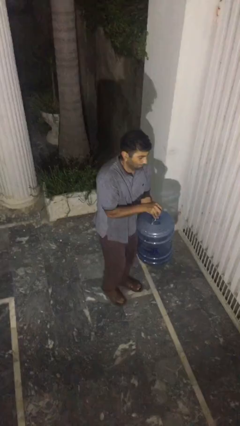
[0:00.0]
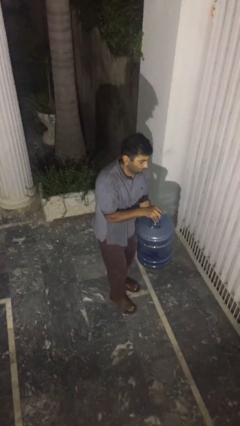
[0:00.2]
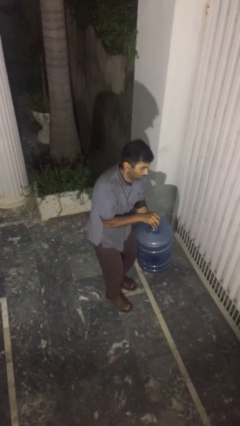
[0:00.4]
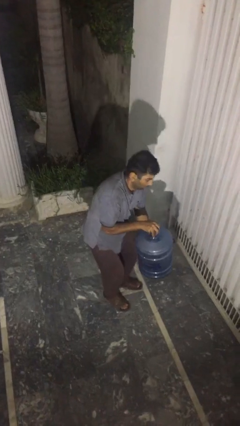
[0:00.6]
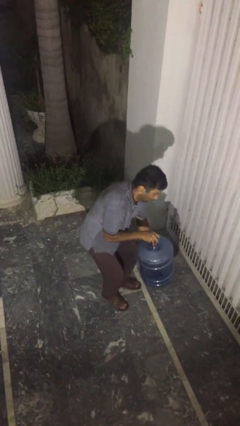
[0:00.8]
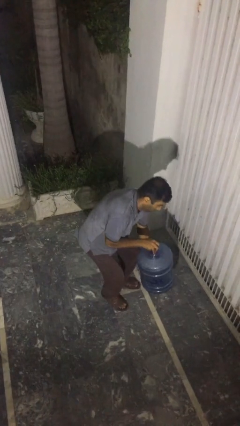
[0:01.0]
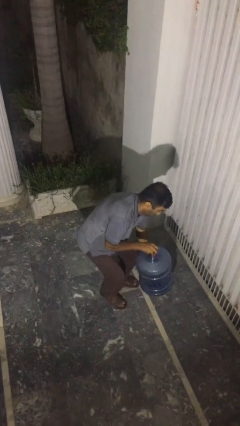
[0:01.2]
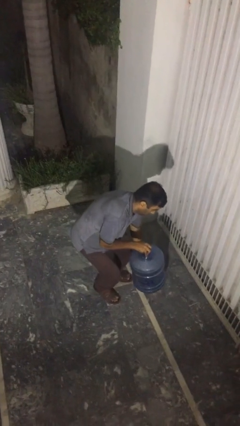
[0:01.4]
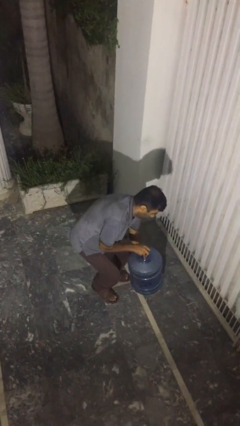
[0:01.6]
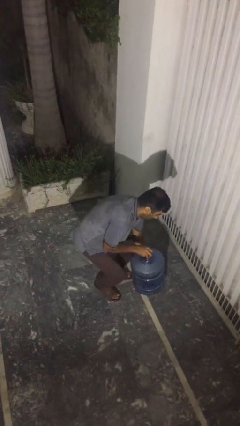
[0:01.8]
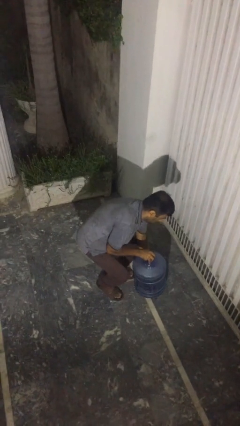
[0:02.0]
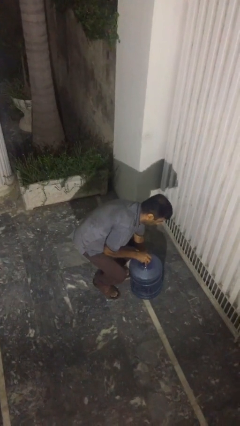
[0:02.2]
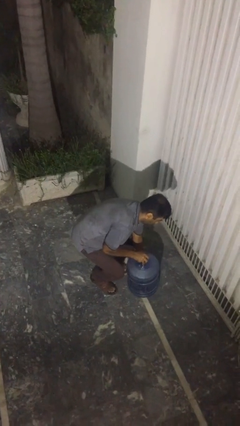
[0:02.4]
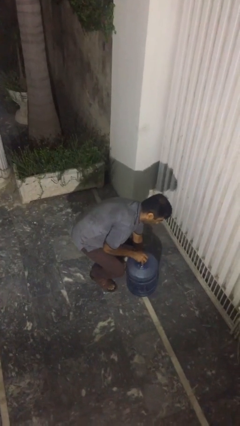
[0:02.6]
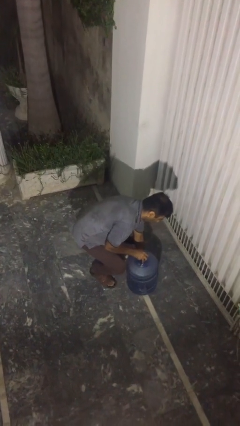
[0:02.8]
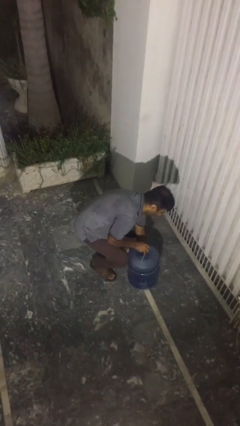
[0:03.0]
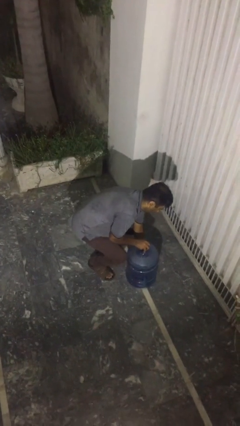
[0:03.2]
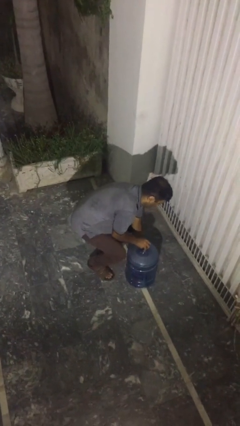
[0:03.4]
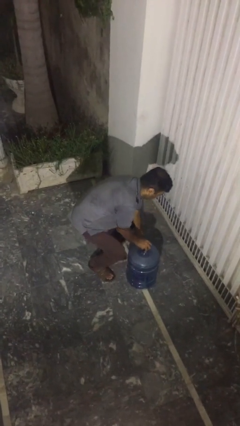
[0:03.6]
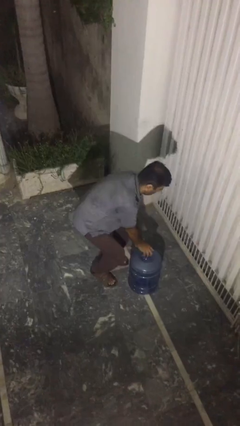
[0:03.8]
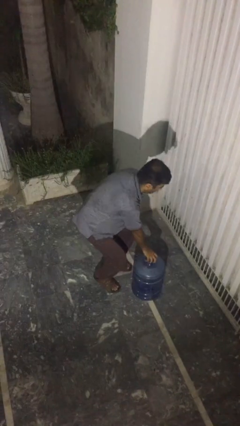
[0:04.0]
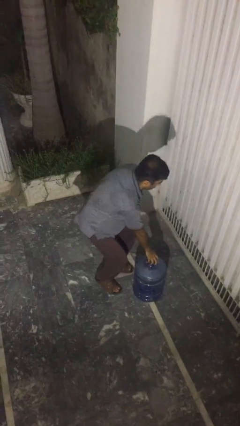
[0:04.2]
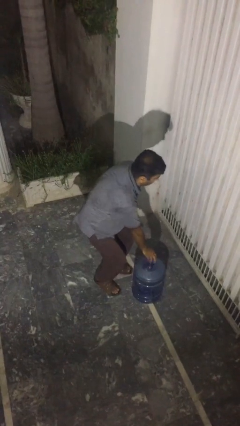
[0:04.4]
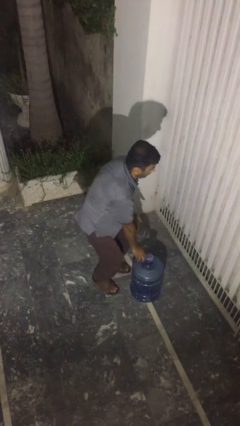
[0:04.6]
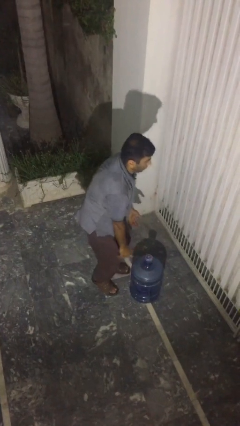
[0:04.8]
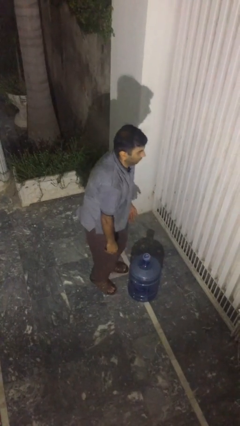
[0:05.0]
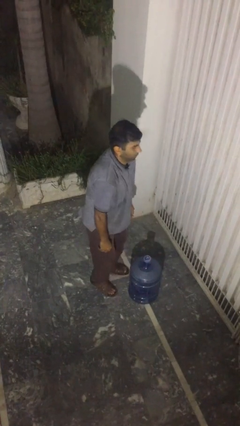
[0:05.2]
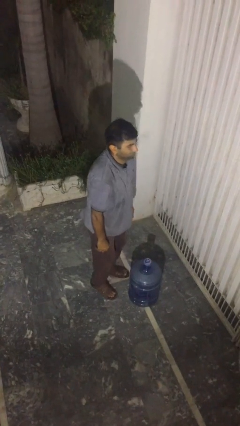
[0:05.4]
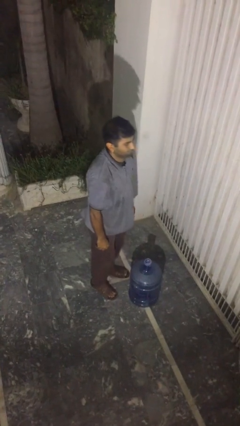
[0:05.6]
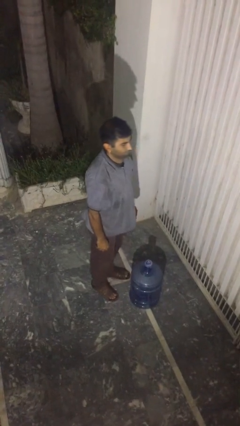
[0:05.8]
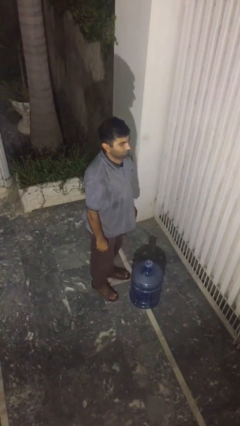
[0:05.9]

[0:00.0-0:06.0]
person puts down object on floor

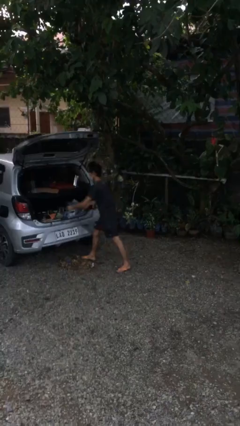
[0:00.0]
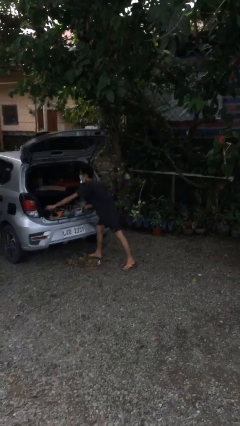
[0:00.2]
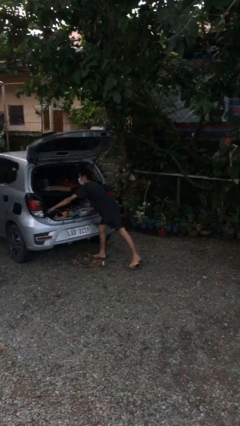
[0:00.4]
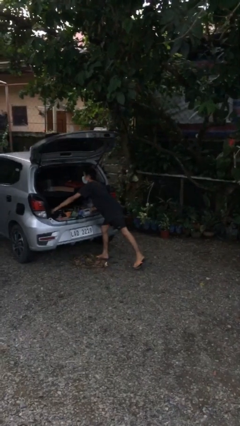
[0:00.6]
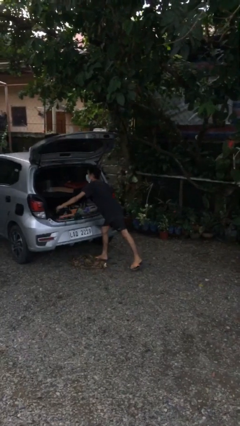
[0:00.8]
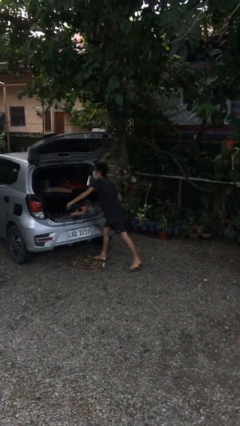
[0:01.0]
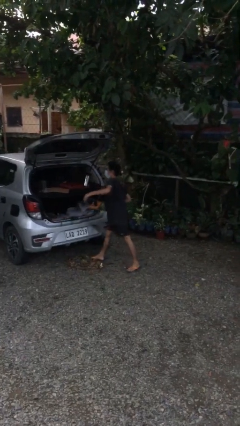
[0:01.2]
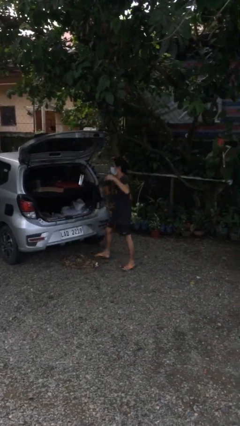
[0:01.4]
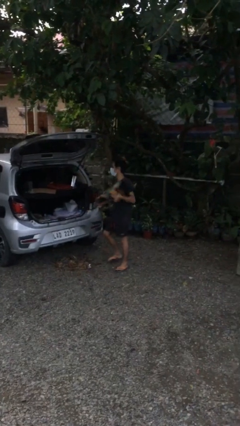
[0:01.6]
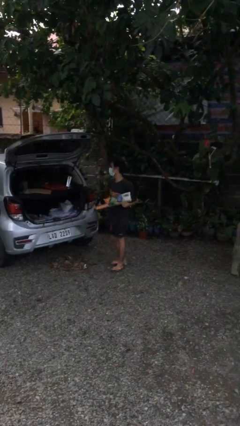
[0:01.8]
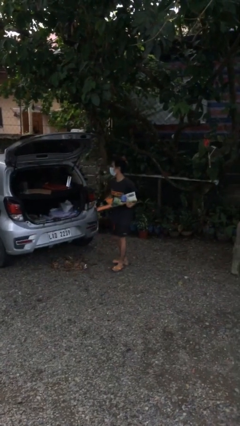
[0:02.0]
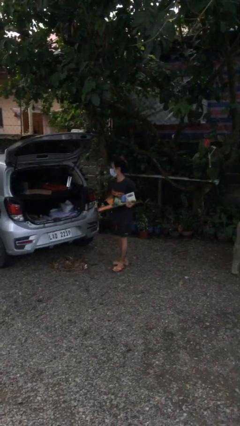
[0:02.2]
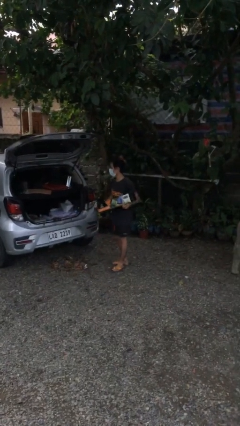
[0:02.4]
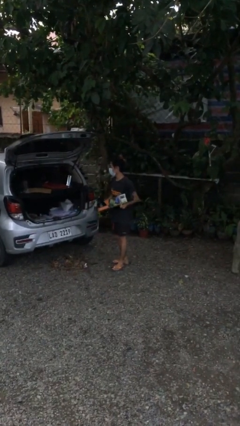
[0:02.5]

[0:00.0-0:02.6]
person unloads car

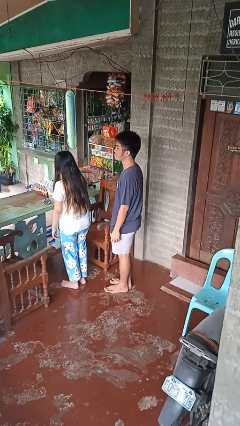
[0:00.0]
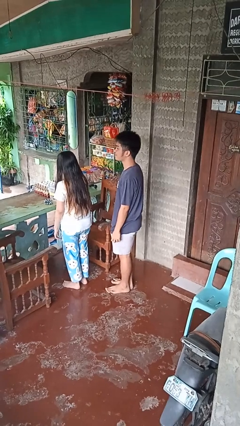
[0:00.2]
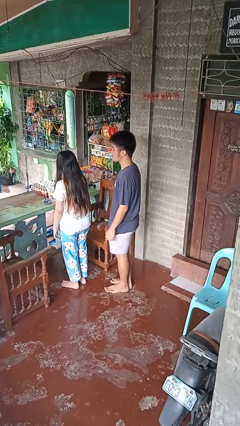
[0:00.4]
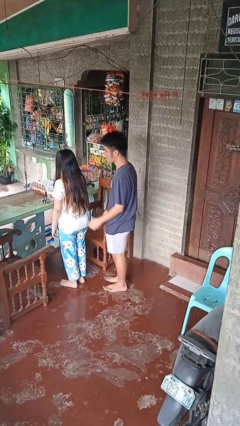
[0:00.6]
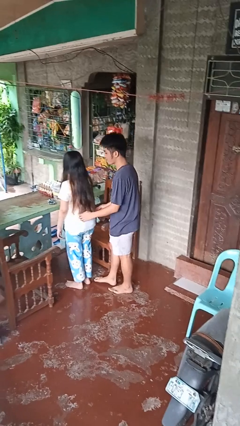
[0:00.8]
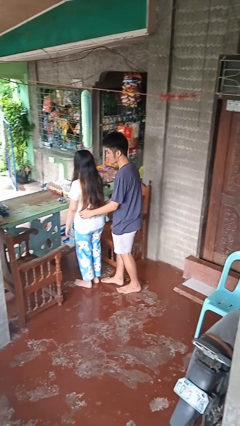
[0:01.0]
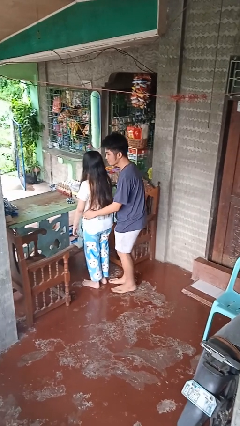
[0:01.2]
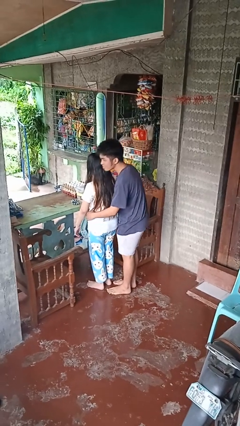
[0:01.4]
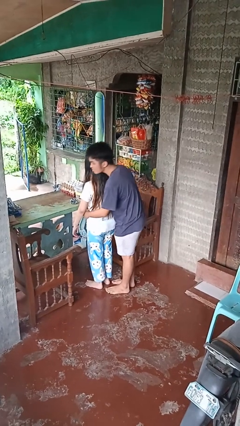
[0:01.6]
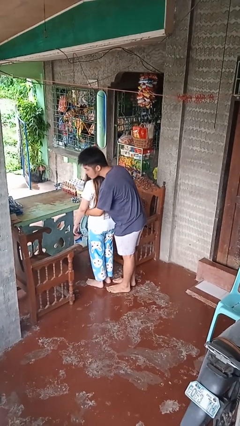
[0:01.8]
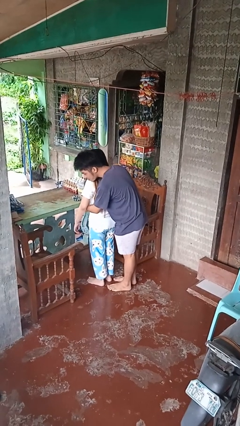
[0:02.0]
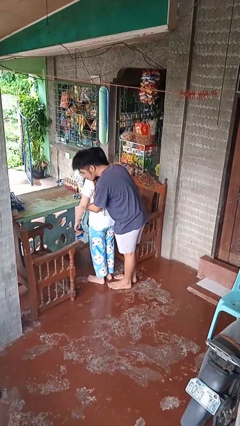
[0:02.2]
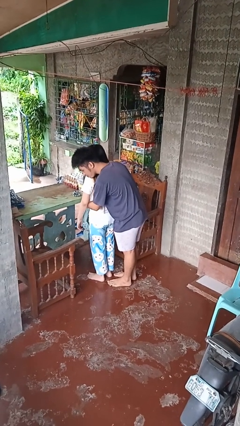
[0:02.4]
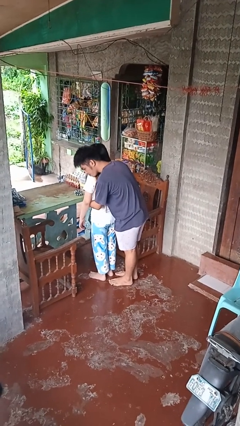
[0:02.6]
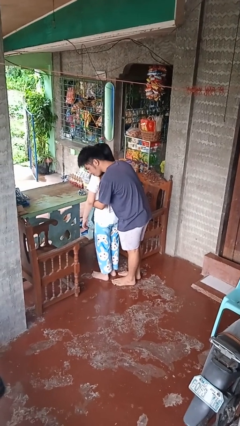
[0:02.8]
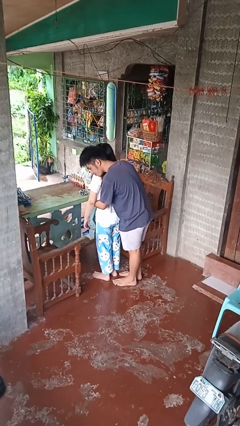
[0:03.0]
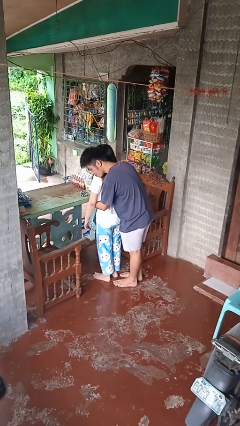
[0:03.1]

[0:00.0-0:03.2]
person hugs person from behind

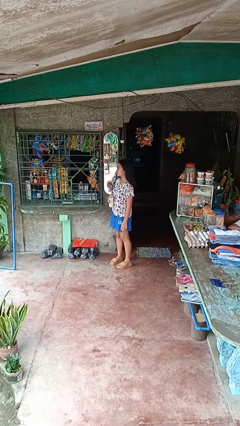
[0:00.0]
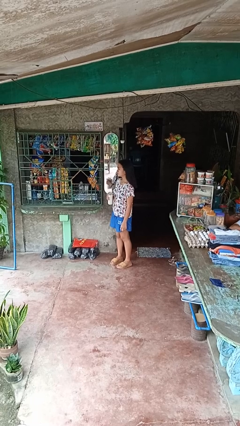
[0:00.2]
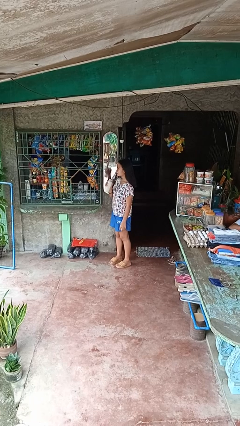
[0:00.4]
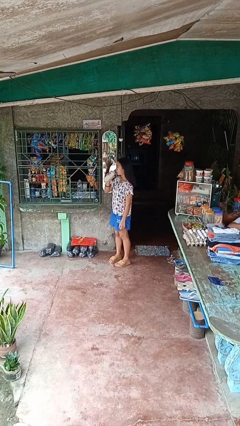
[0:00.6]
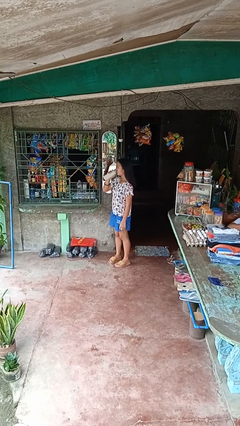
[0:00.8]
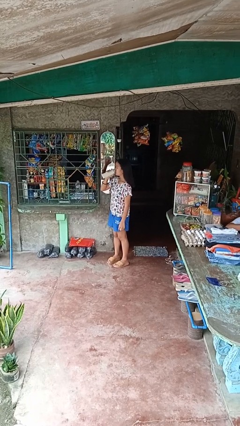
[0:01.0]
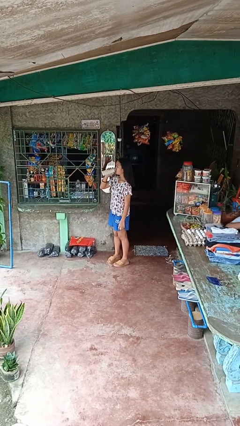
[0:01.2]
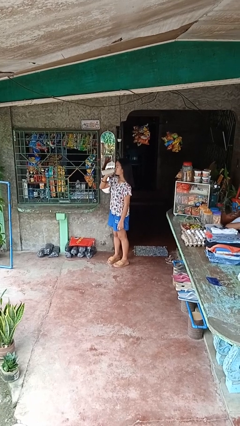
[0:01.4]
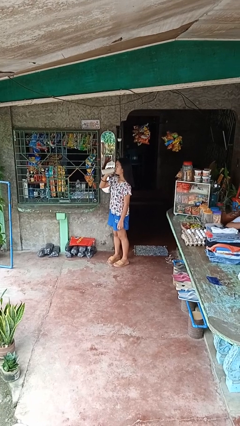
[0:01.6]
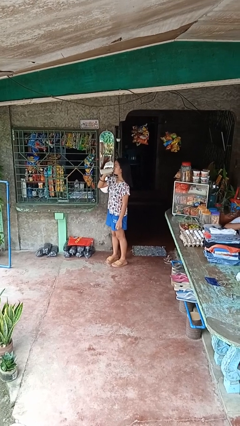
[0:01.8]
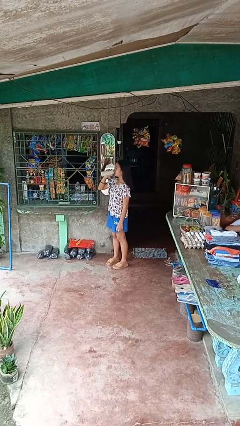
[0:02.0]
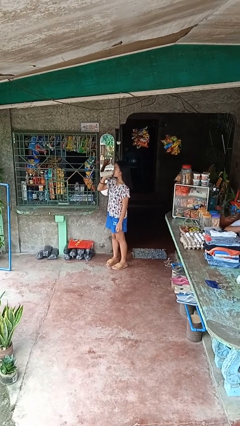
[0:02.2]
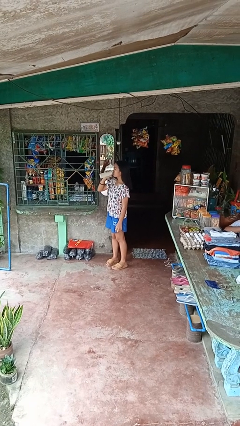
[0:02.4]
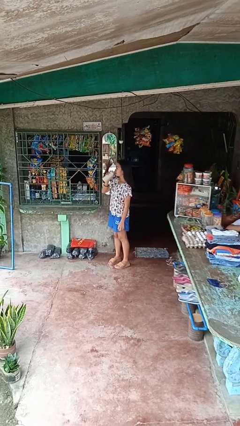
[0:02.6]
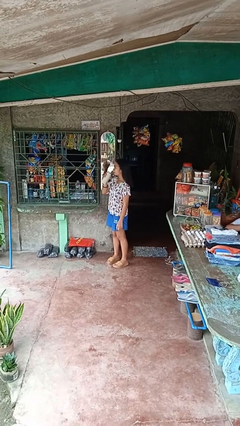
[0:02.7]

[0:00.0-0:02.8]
person drinks from bottle

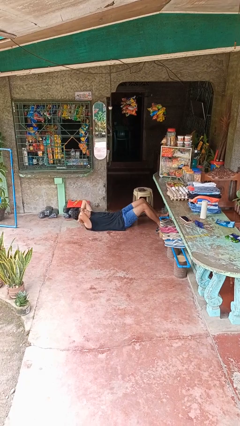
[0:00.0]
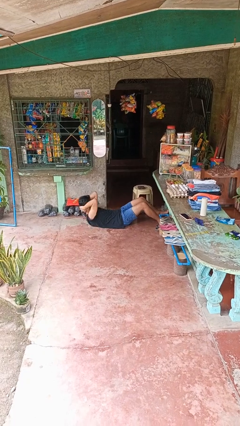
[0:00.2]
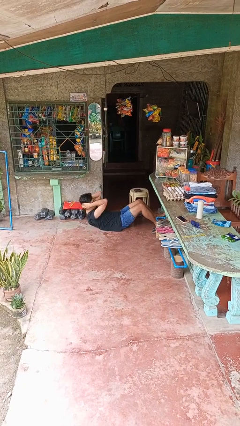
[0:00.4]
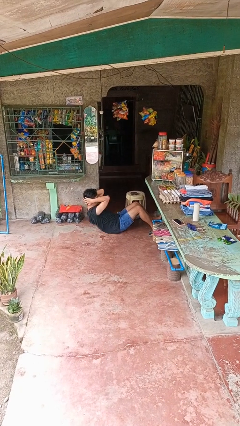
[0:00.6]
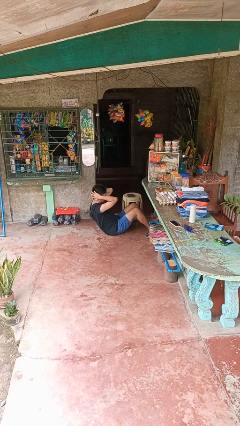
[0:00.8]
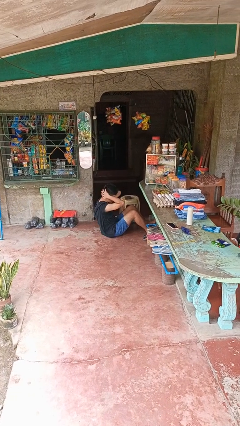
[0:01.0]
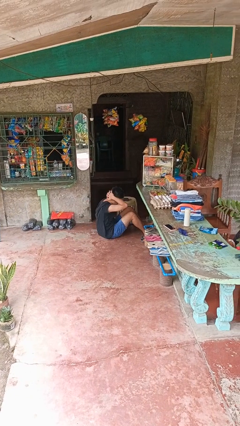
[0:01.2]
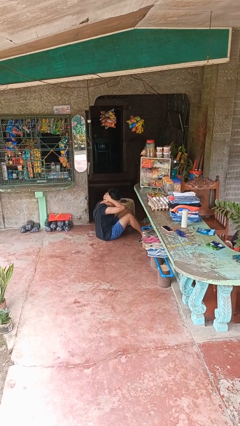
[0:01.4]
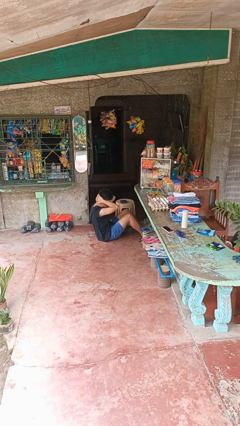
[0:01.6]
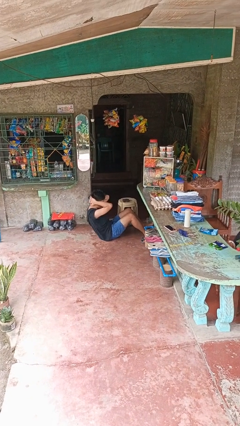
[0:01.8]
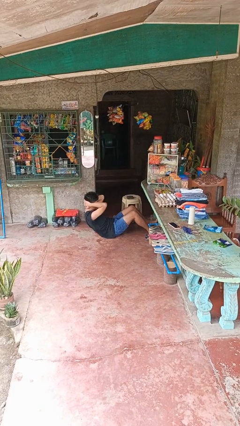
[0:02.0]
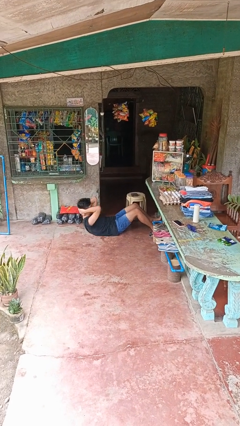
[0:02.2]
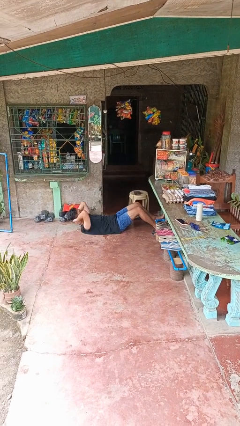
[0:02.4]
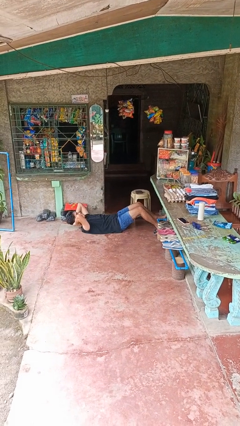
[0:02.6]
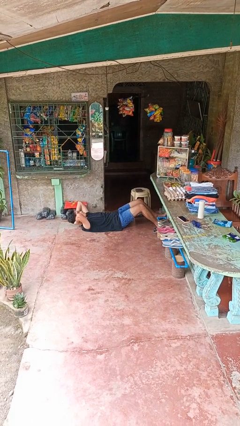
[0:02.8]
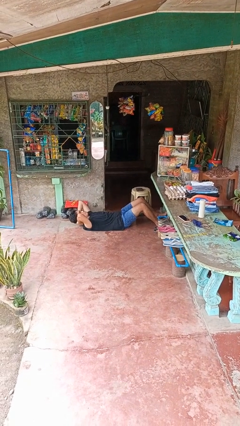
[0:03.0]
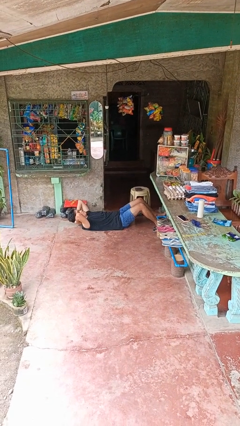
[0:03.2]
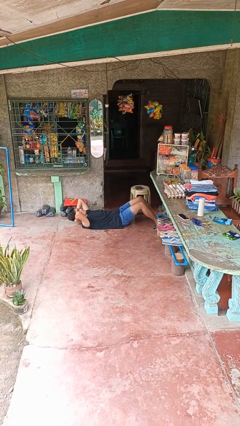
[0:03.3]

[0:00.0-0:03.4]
person exercises with situp
